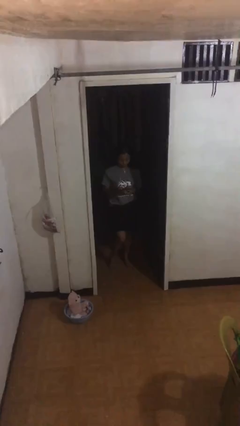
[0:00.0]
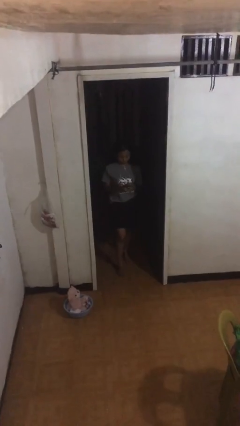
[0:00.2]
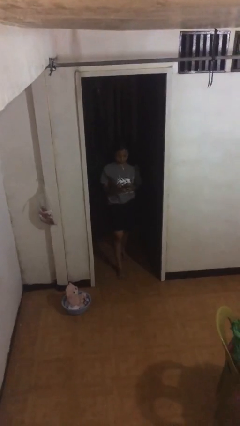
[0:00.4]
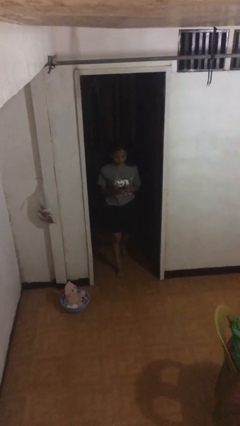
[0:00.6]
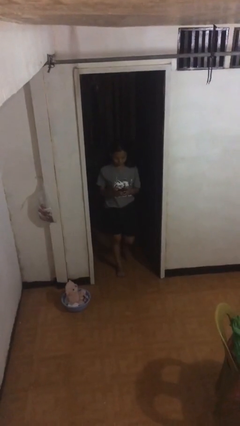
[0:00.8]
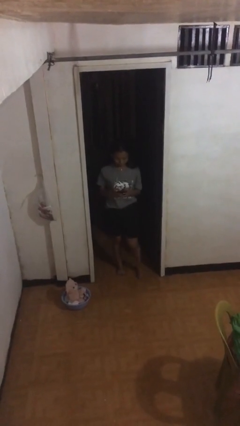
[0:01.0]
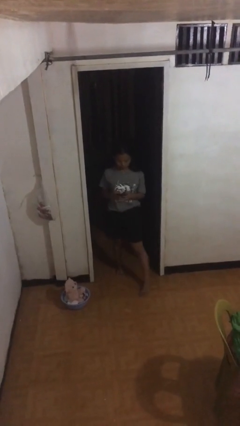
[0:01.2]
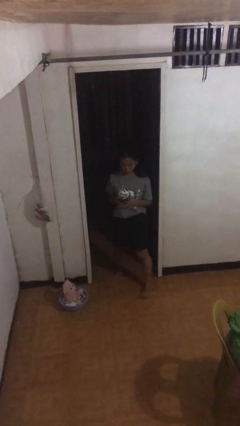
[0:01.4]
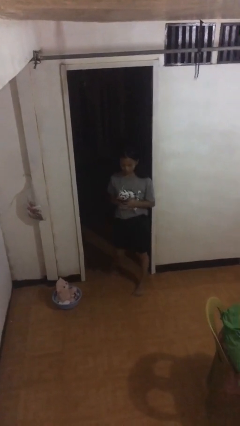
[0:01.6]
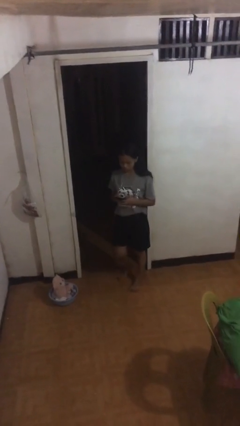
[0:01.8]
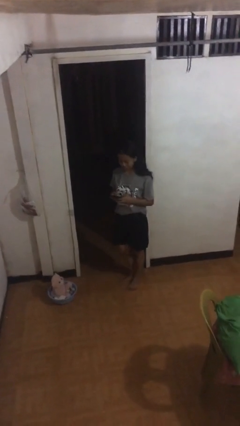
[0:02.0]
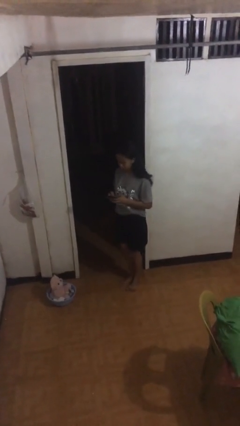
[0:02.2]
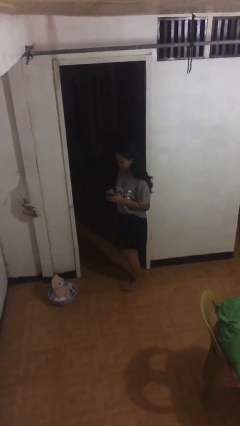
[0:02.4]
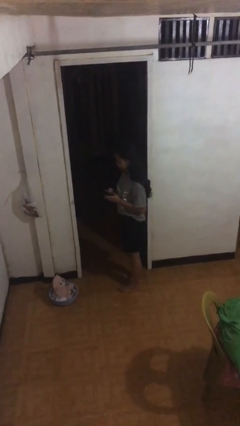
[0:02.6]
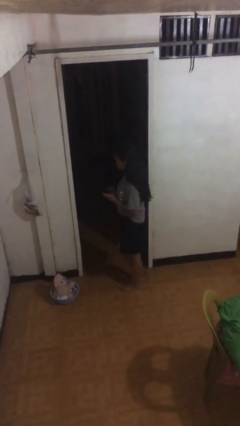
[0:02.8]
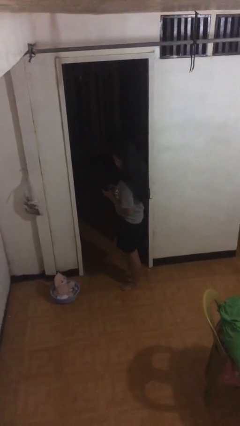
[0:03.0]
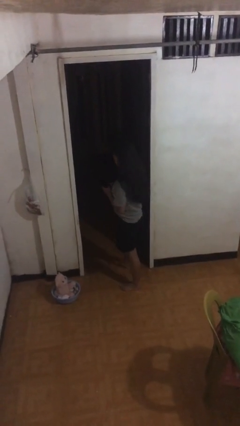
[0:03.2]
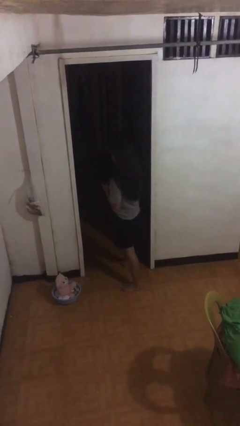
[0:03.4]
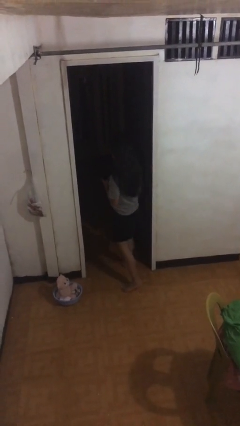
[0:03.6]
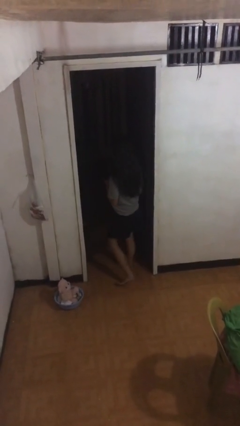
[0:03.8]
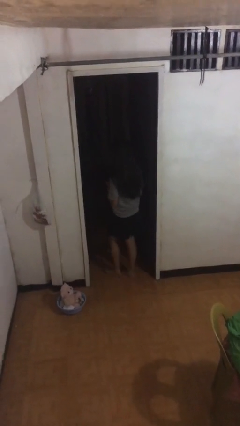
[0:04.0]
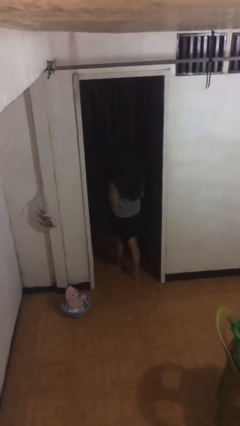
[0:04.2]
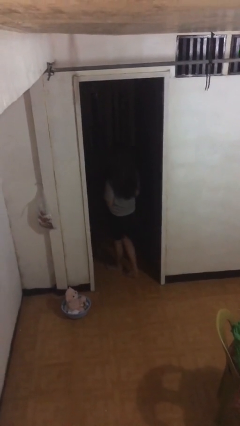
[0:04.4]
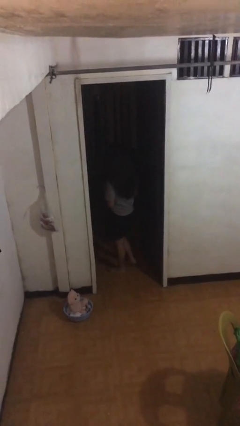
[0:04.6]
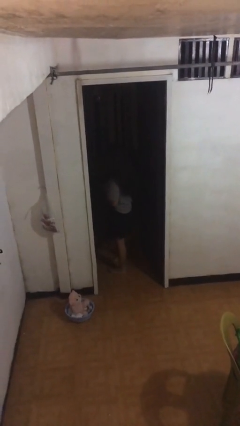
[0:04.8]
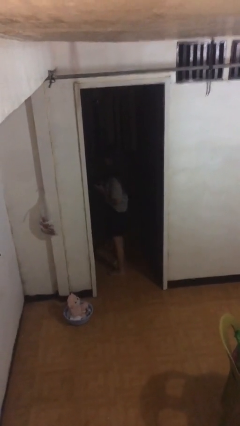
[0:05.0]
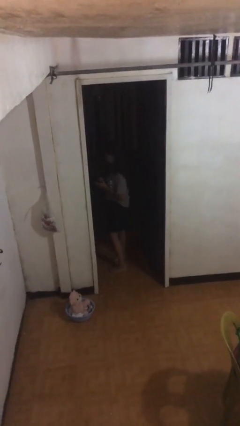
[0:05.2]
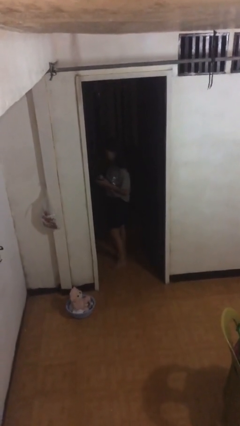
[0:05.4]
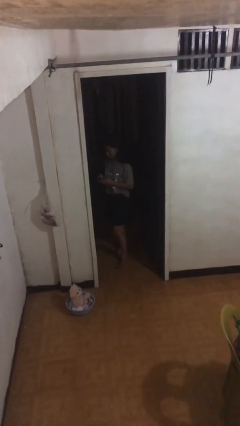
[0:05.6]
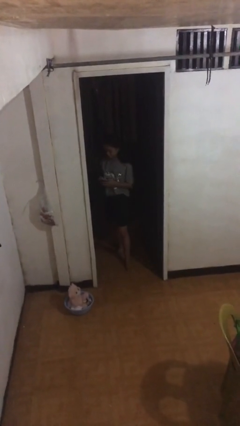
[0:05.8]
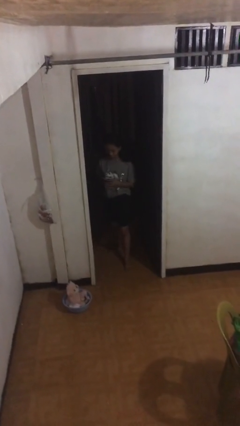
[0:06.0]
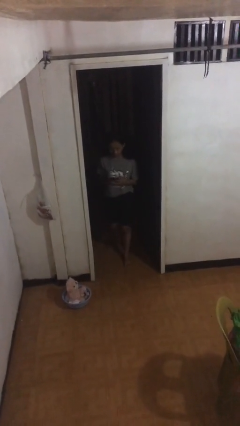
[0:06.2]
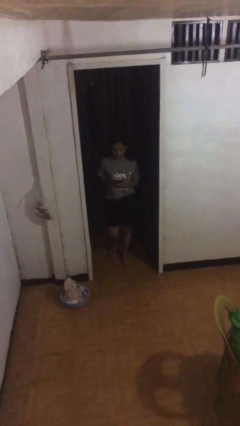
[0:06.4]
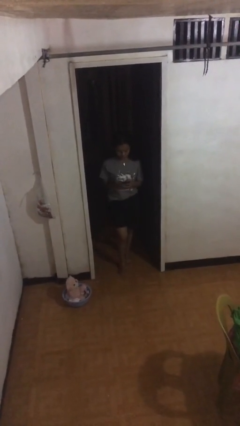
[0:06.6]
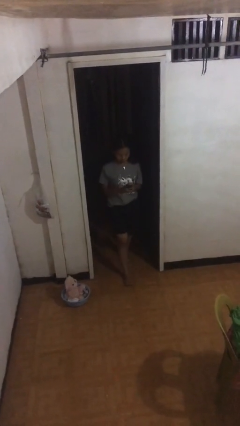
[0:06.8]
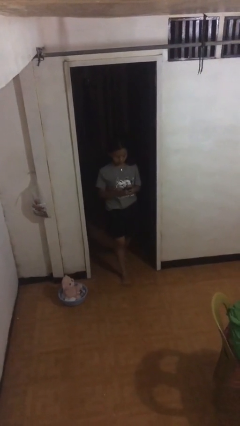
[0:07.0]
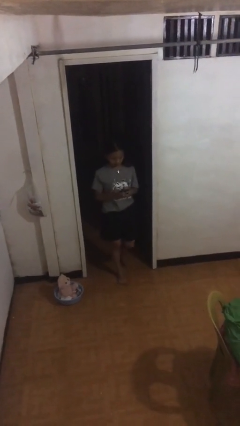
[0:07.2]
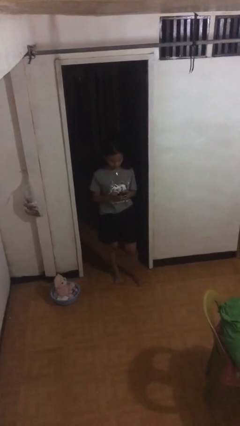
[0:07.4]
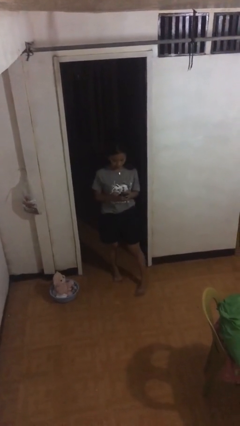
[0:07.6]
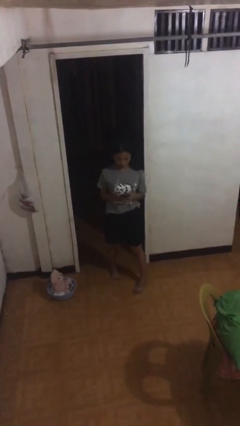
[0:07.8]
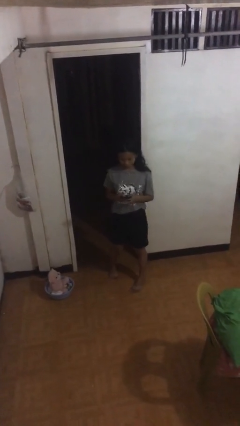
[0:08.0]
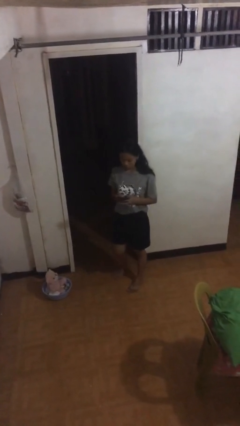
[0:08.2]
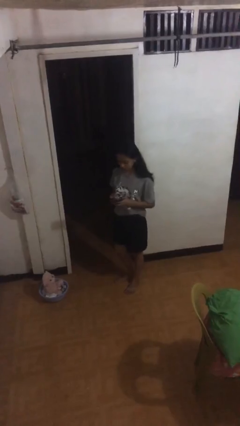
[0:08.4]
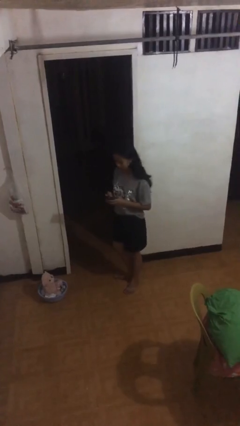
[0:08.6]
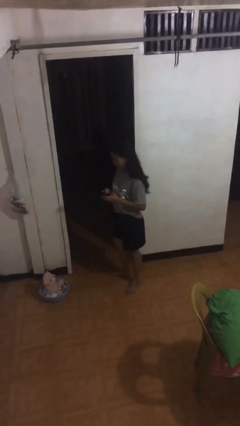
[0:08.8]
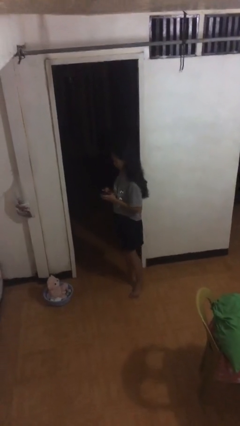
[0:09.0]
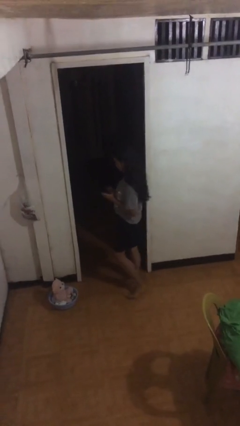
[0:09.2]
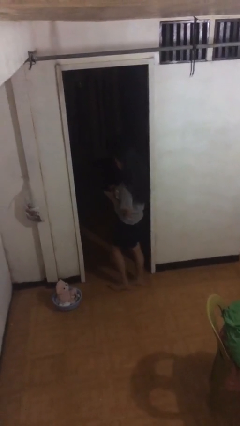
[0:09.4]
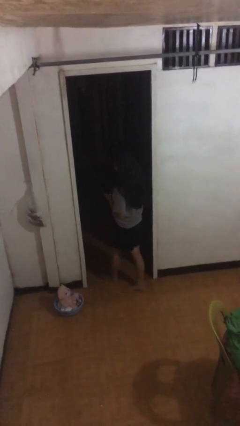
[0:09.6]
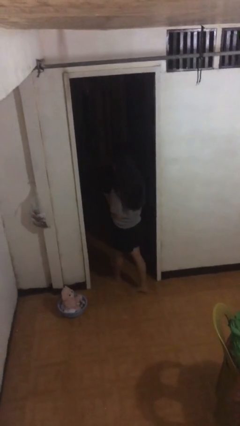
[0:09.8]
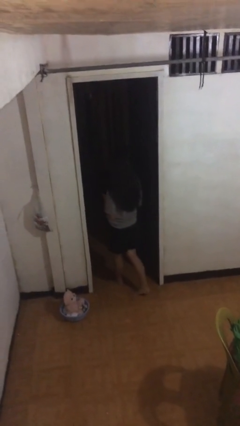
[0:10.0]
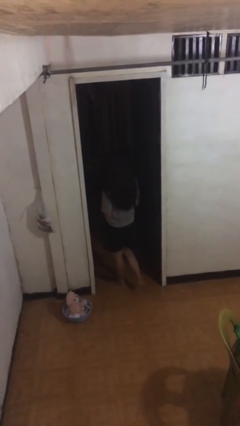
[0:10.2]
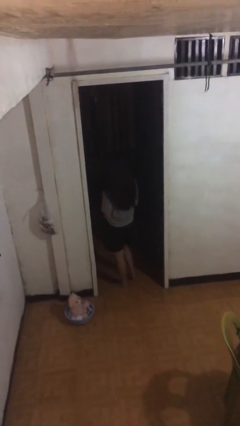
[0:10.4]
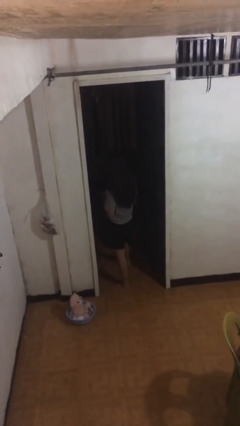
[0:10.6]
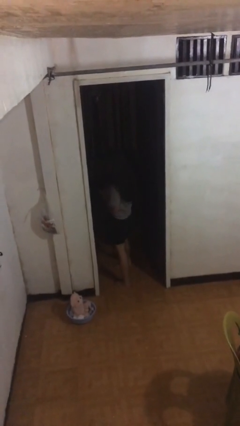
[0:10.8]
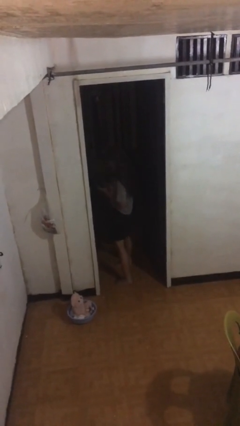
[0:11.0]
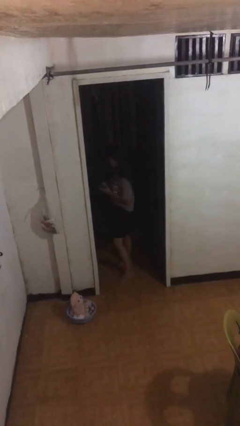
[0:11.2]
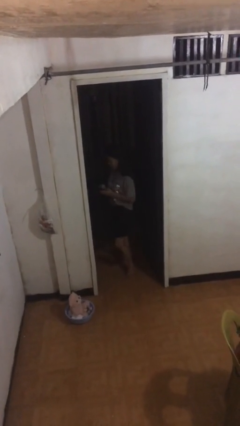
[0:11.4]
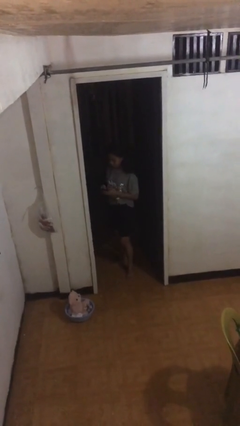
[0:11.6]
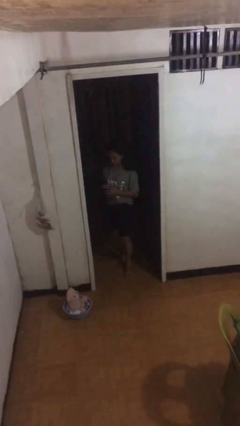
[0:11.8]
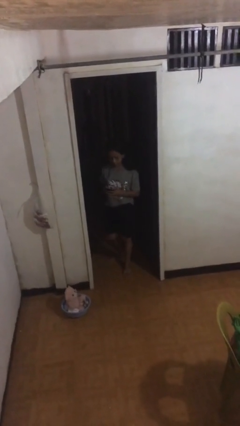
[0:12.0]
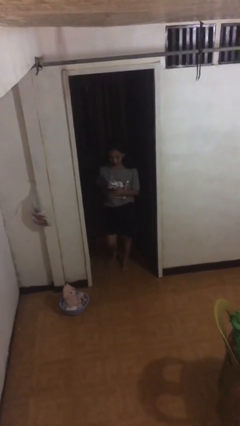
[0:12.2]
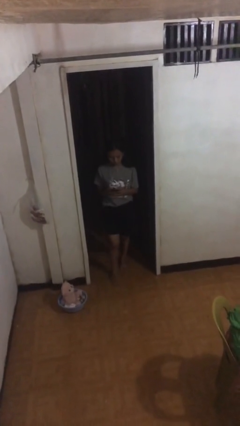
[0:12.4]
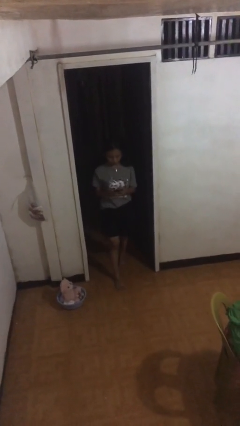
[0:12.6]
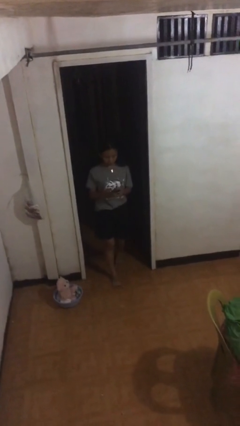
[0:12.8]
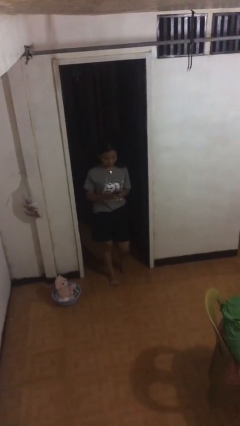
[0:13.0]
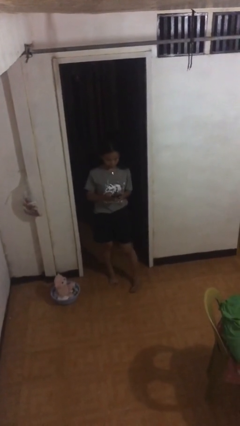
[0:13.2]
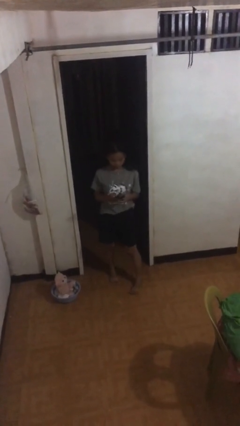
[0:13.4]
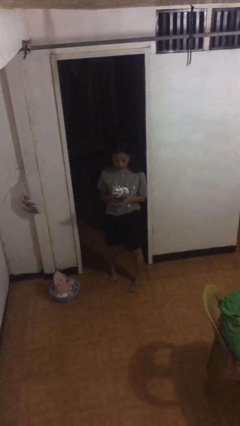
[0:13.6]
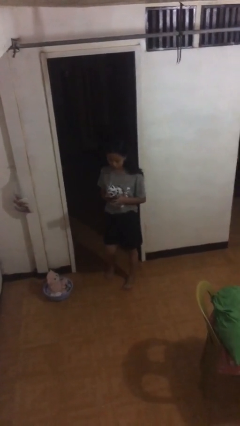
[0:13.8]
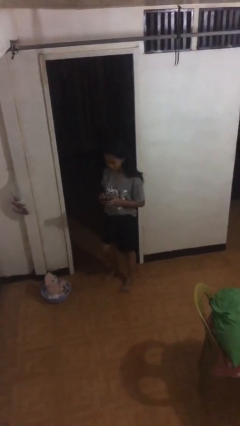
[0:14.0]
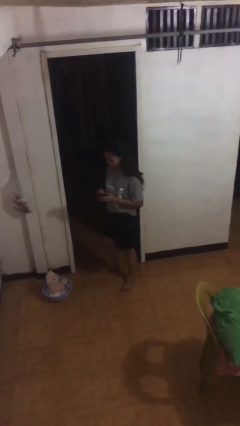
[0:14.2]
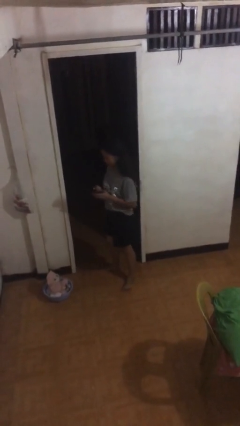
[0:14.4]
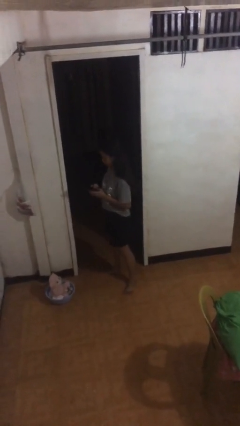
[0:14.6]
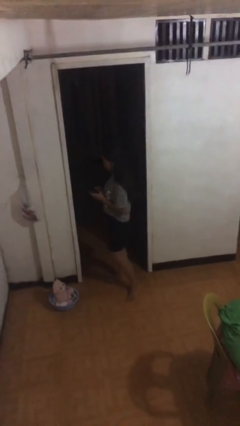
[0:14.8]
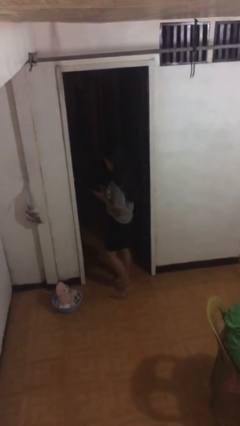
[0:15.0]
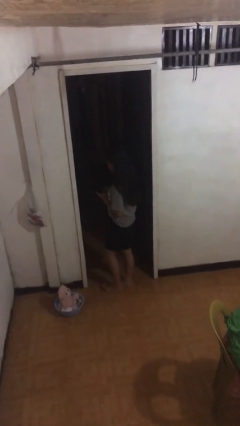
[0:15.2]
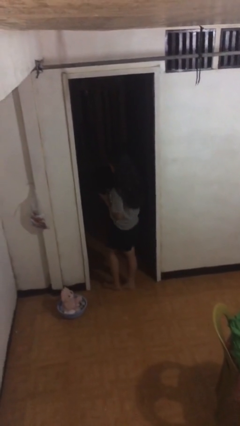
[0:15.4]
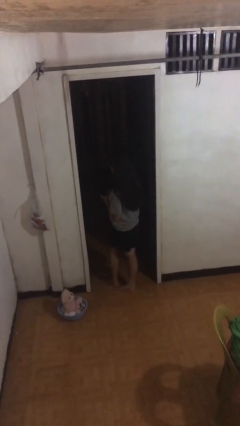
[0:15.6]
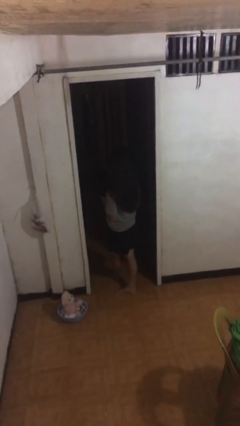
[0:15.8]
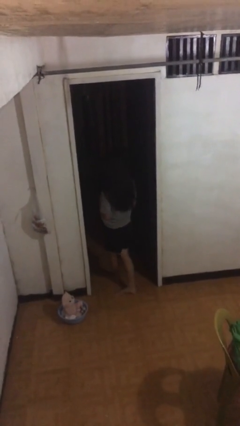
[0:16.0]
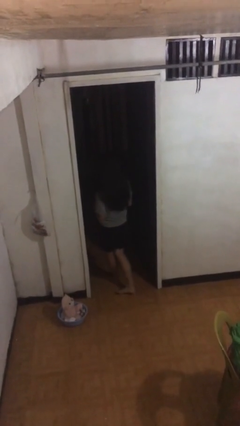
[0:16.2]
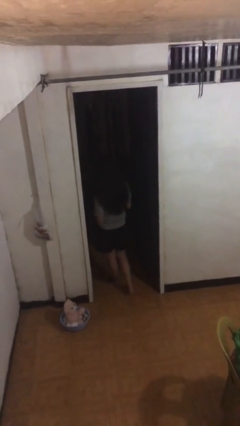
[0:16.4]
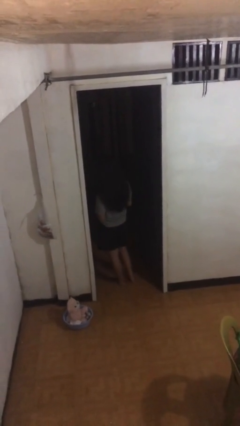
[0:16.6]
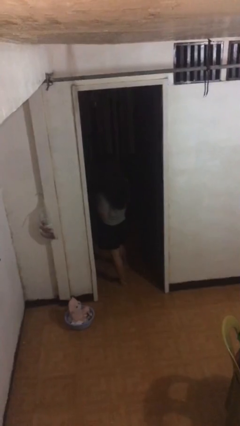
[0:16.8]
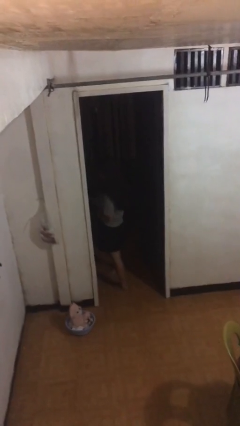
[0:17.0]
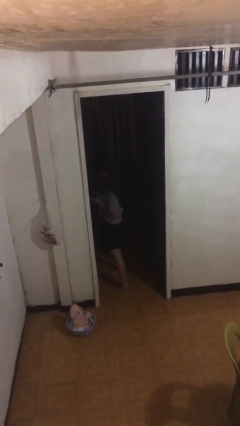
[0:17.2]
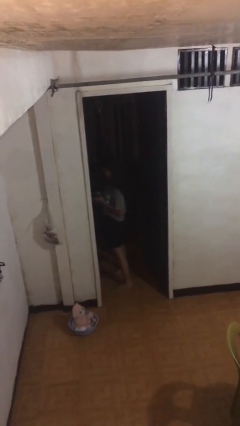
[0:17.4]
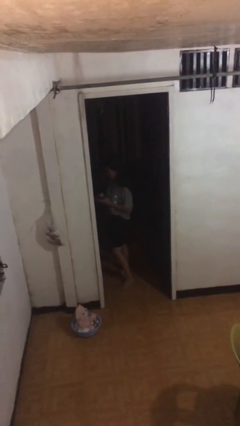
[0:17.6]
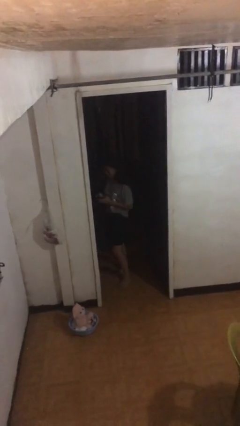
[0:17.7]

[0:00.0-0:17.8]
person texts on phone

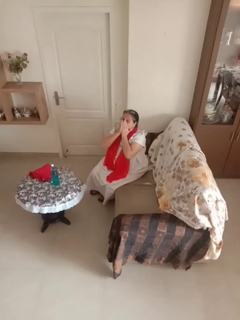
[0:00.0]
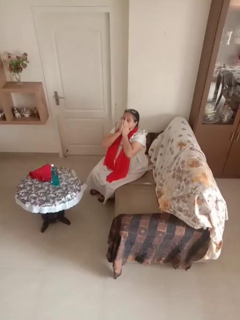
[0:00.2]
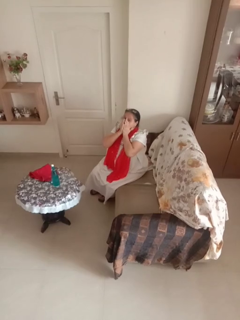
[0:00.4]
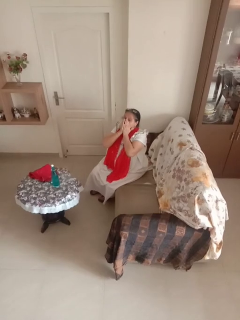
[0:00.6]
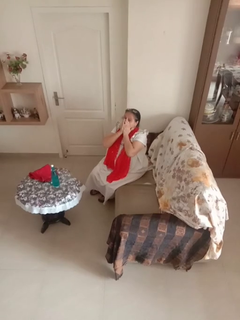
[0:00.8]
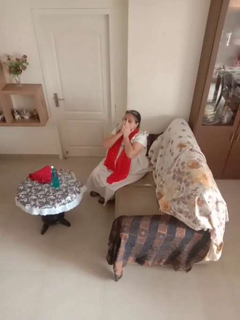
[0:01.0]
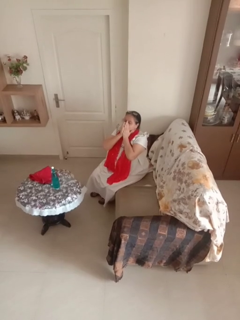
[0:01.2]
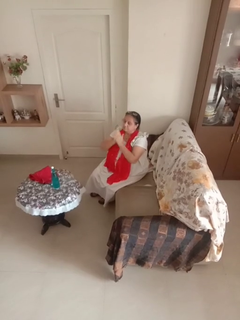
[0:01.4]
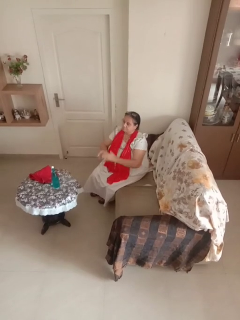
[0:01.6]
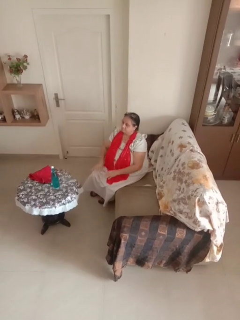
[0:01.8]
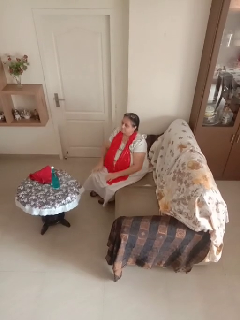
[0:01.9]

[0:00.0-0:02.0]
person covers face with hands
